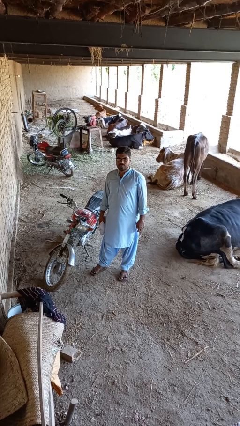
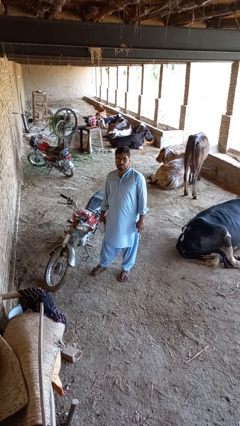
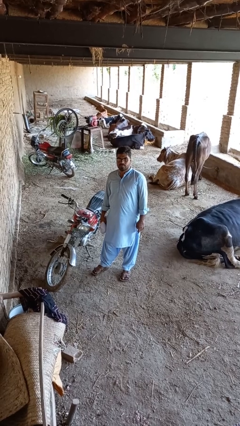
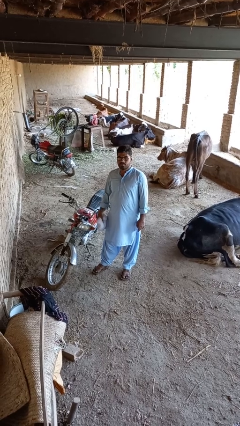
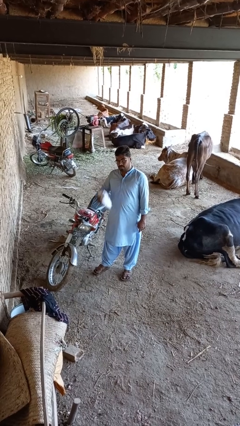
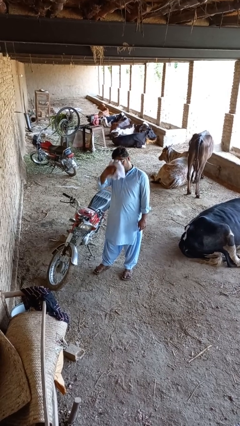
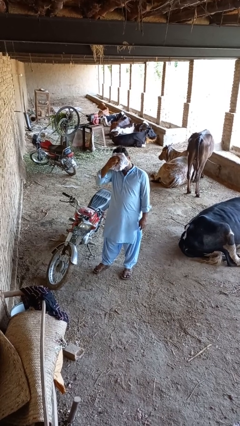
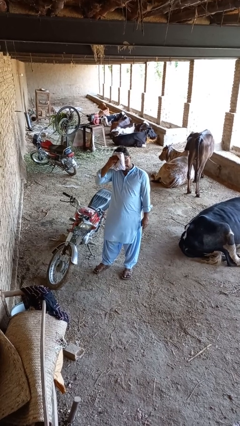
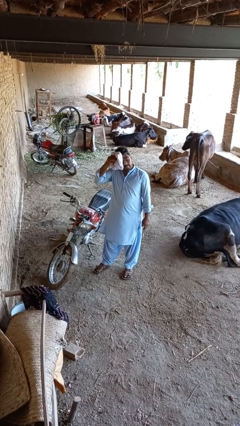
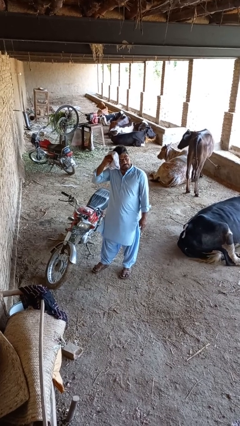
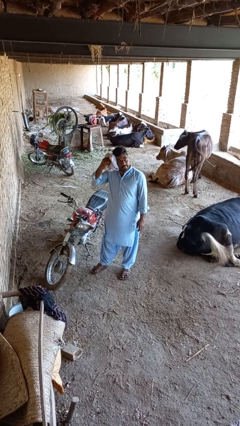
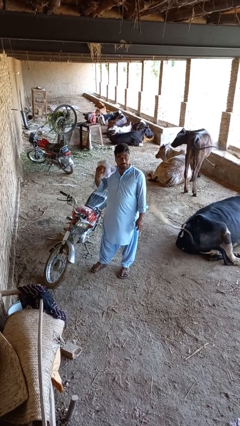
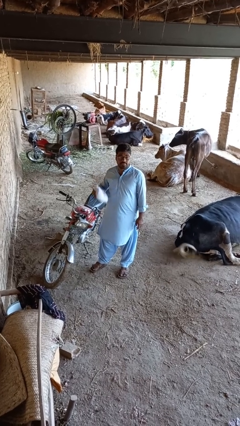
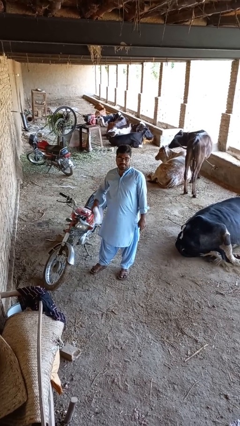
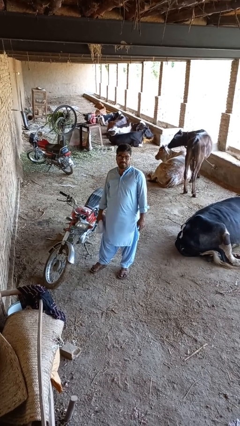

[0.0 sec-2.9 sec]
person wipes mouth with napkin

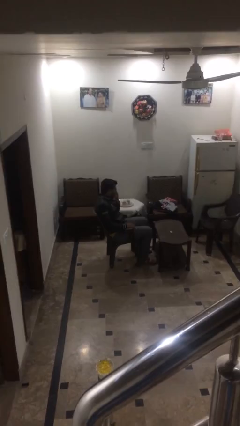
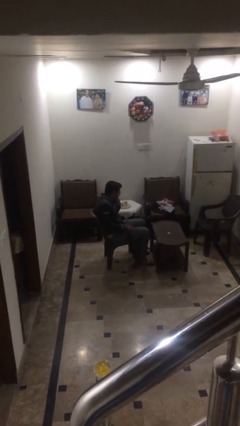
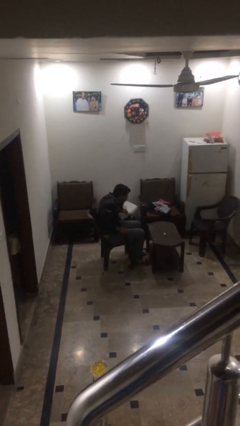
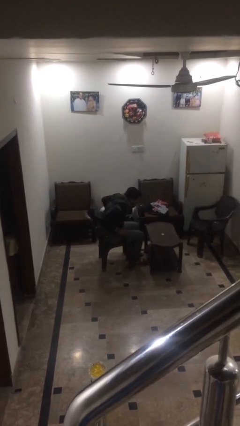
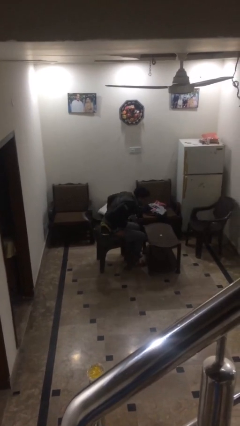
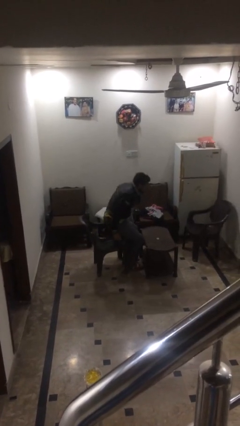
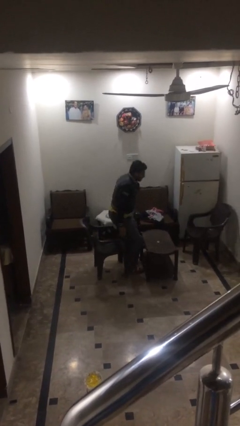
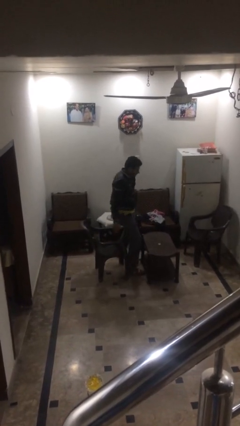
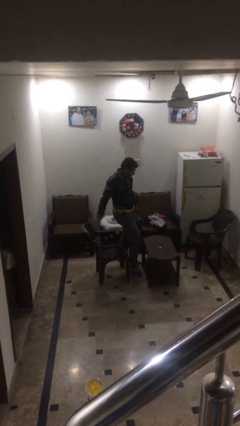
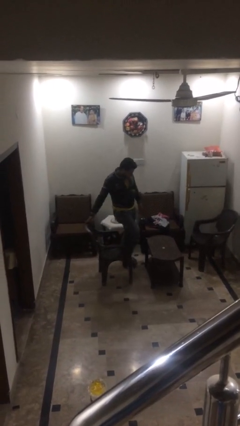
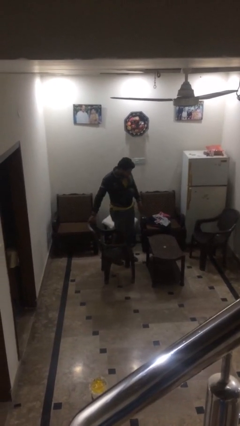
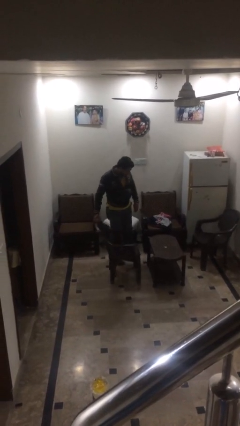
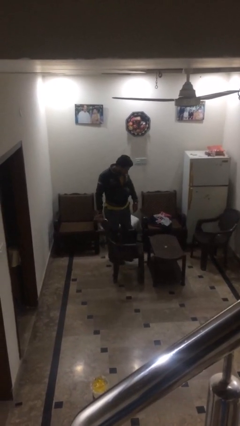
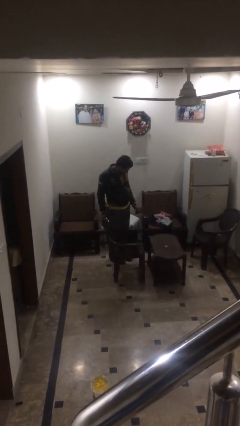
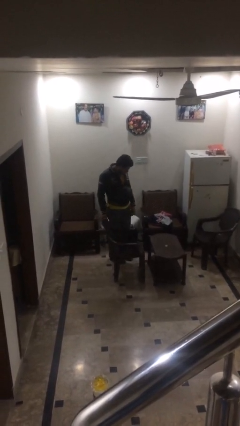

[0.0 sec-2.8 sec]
person stands up

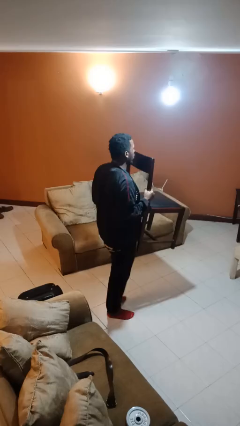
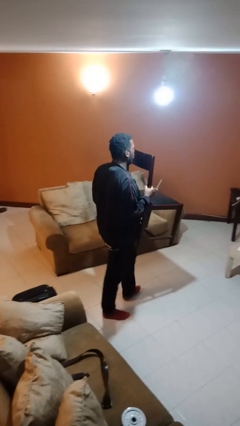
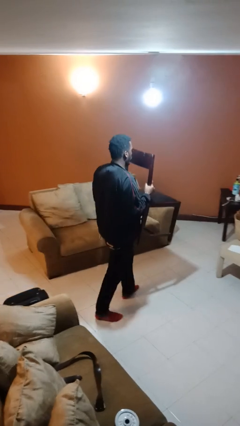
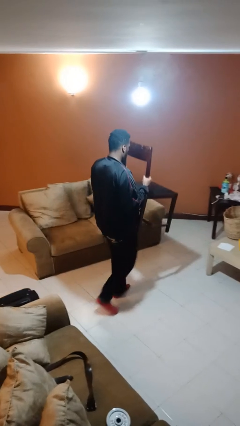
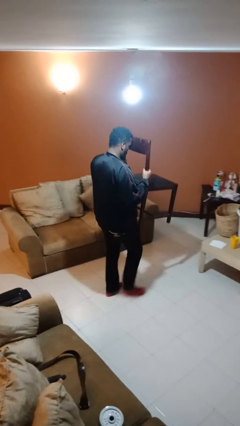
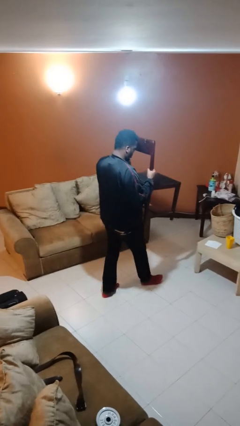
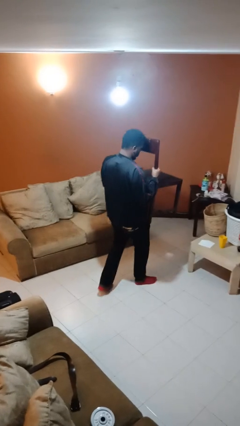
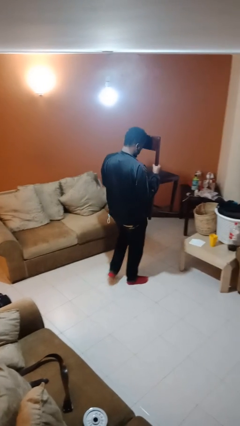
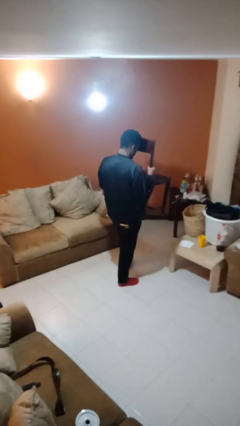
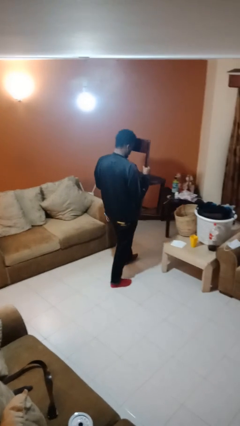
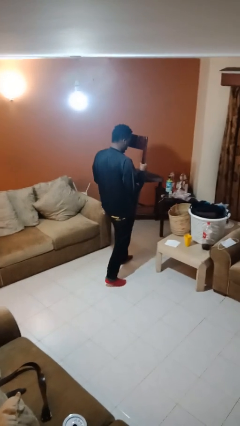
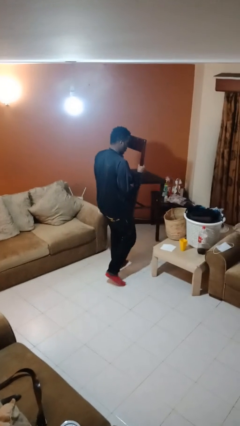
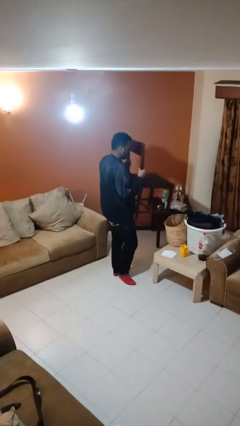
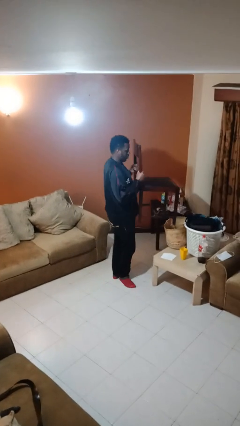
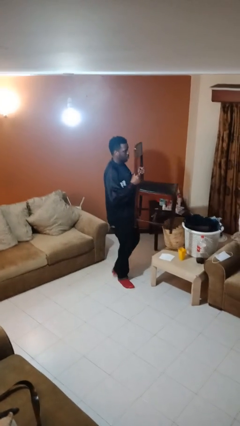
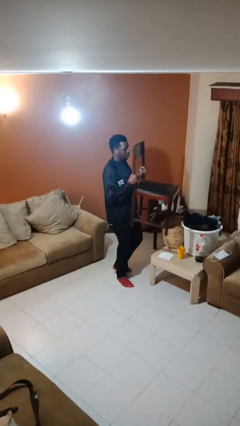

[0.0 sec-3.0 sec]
person carries furniture

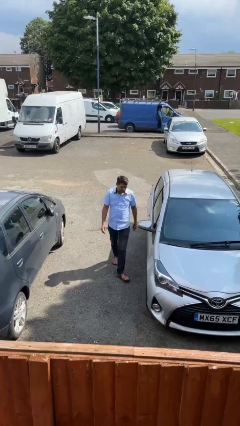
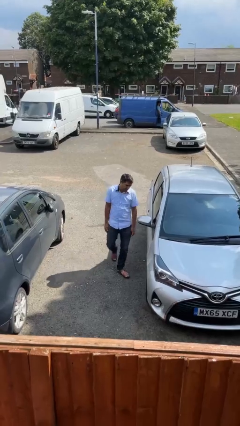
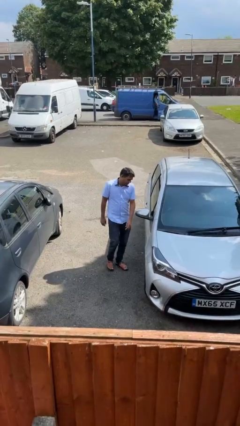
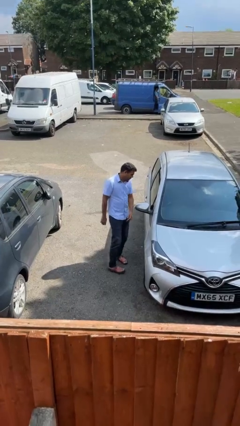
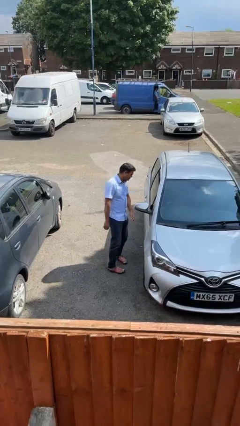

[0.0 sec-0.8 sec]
person walks around car

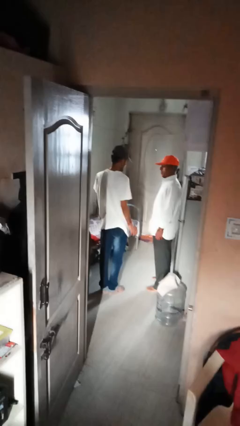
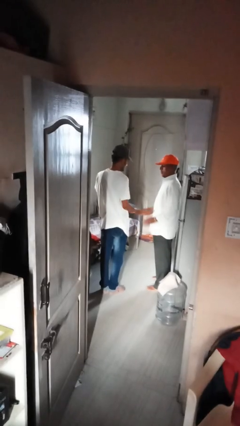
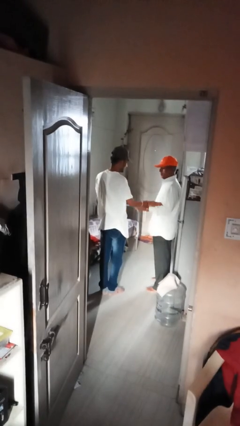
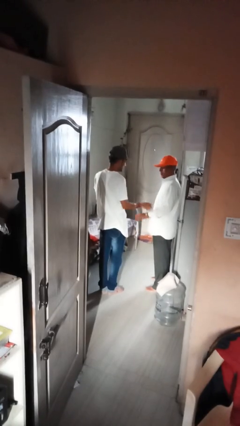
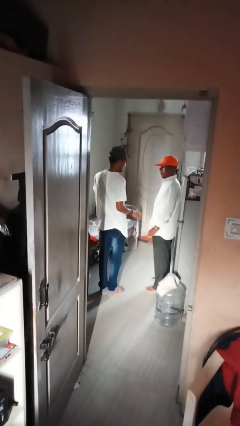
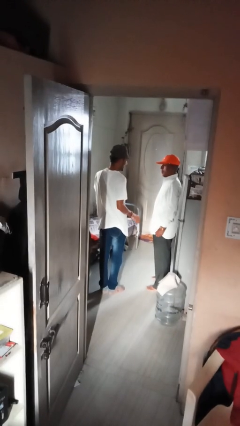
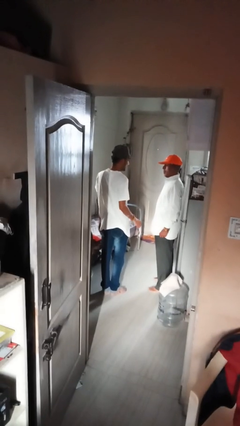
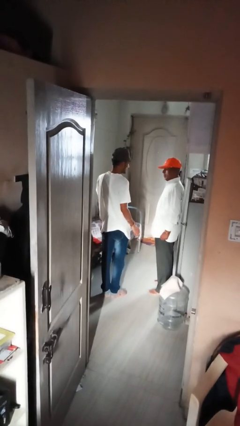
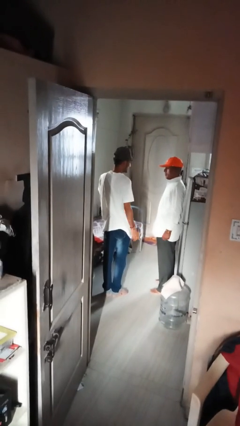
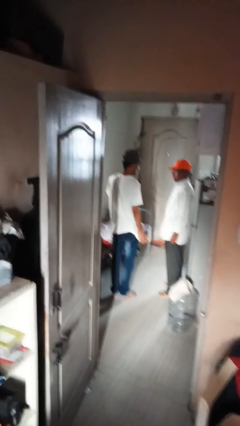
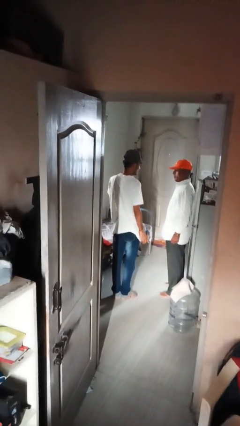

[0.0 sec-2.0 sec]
person tickles person

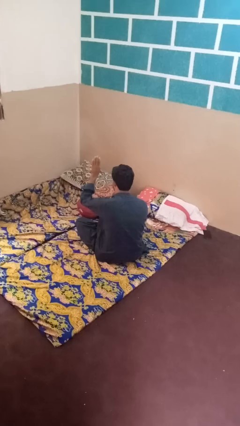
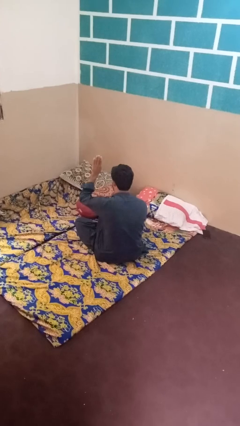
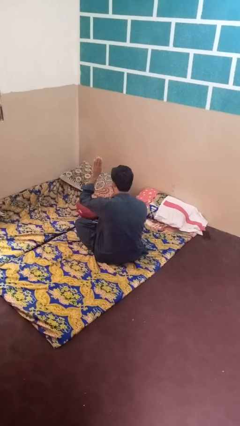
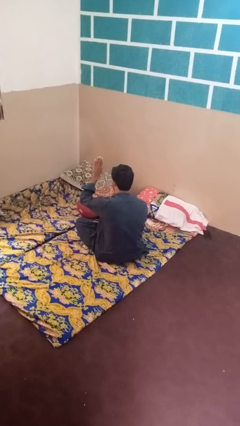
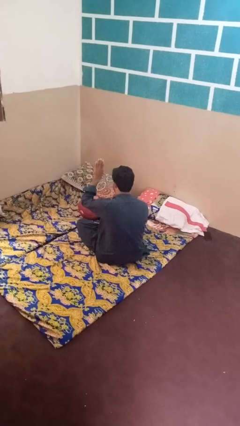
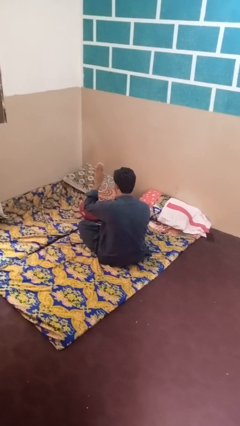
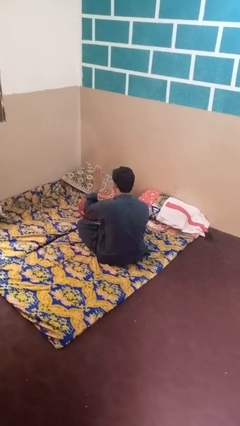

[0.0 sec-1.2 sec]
person gestures number four

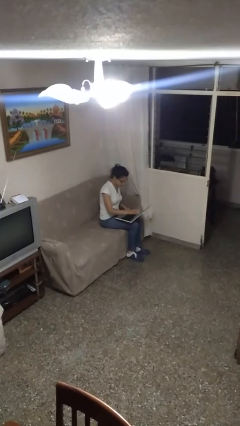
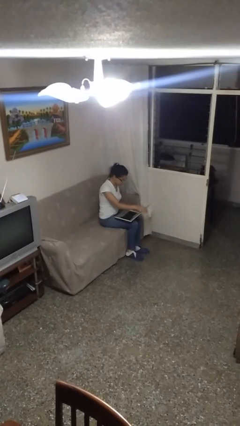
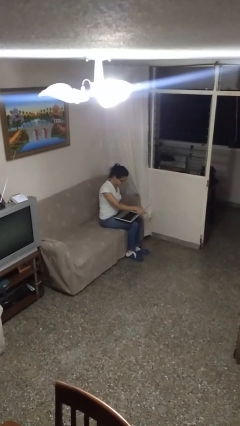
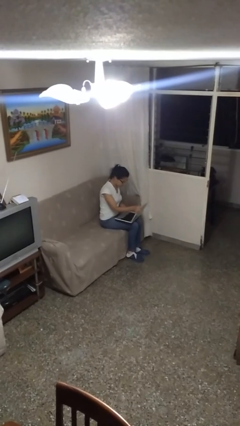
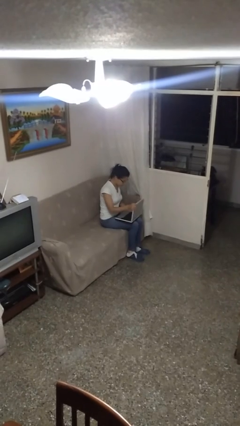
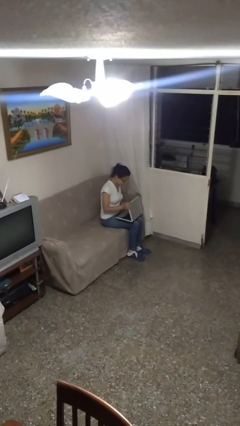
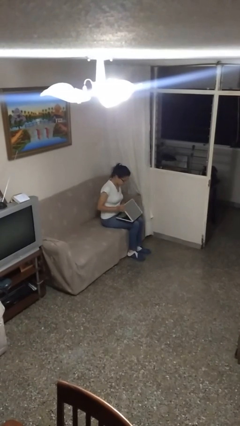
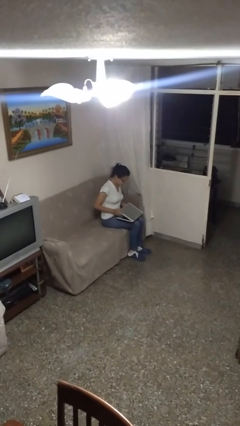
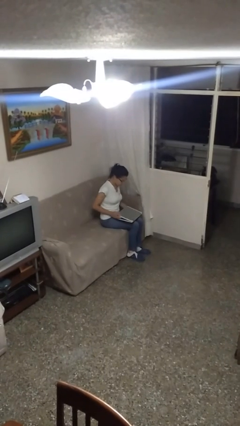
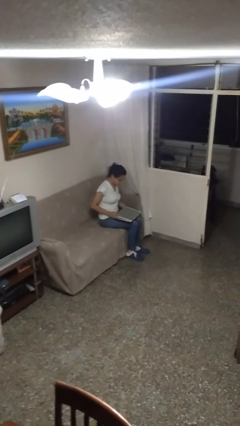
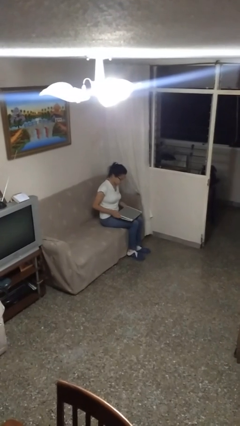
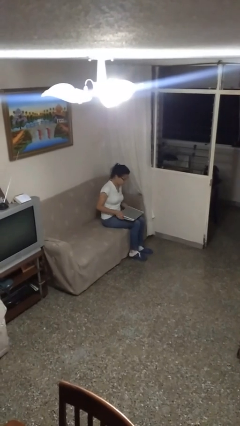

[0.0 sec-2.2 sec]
person closes laptop

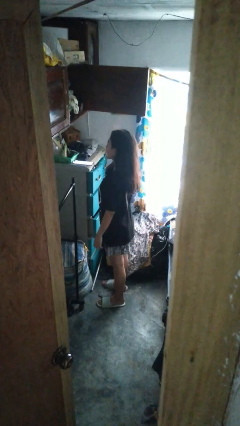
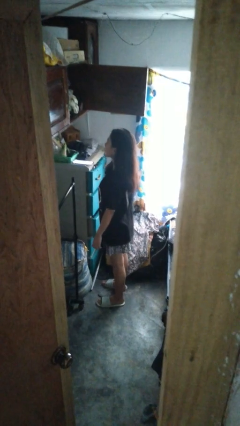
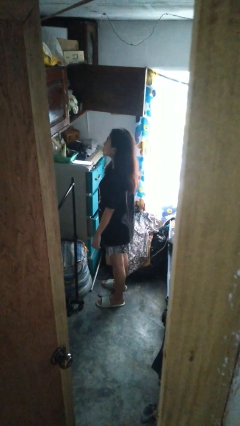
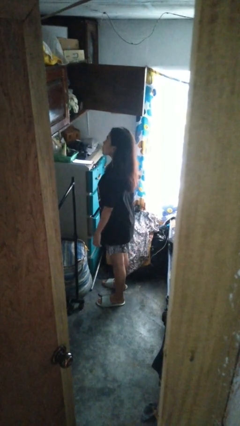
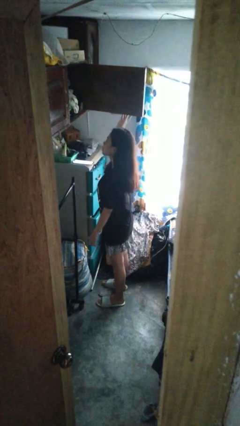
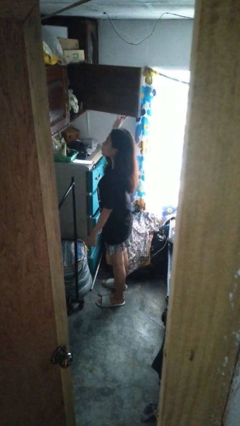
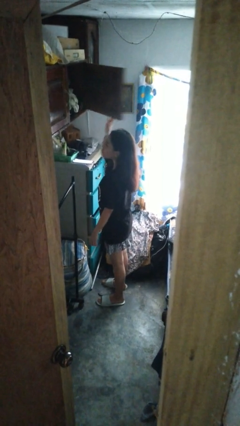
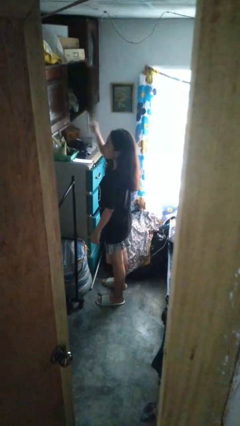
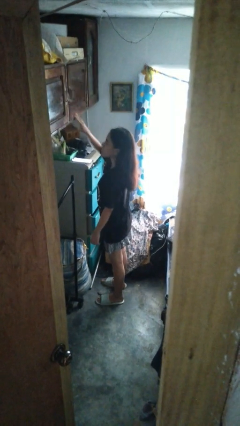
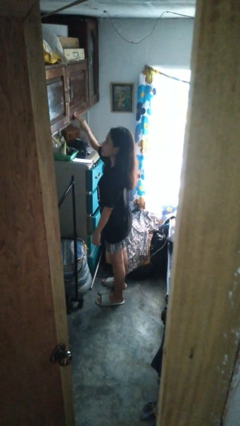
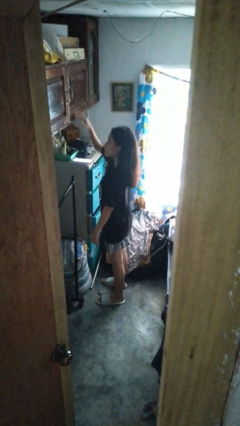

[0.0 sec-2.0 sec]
person closes closet door

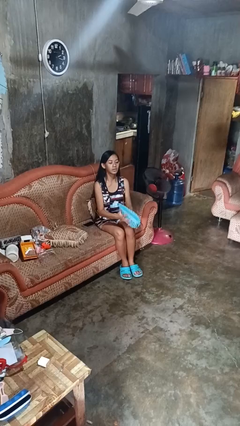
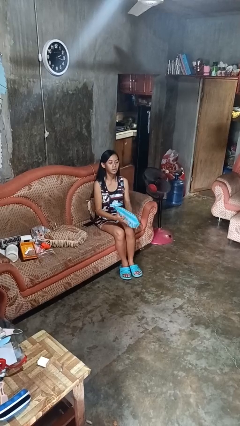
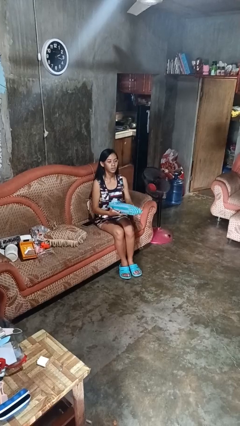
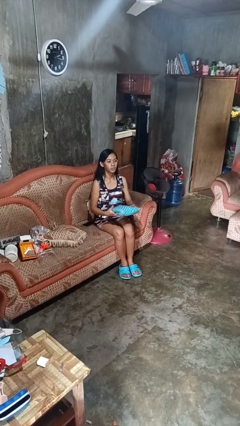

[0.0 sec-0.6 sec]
person catches dropped object
